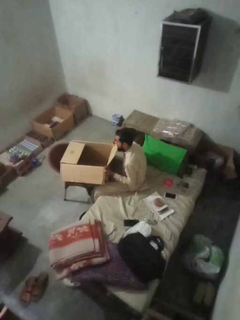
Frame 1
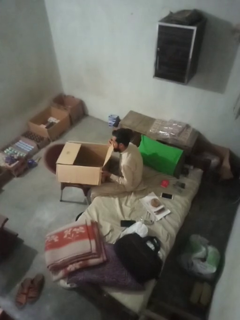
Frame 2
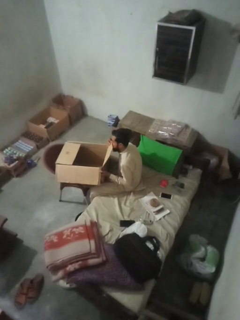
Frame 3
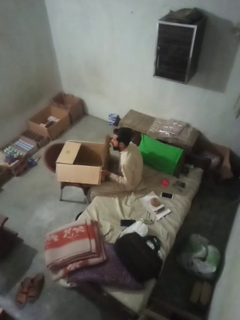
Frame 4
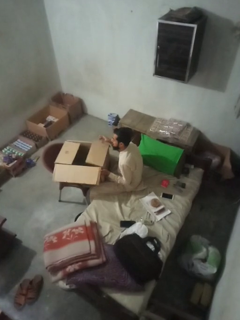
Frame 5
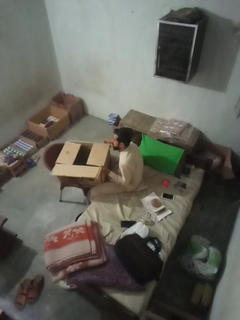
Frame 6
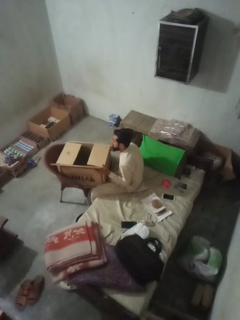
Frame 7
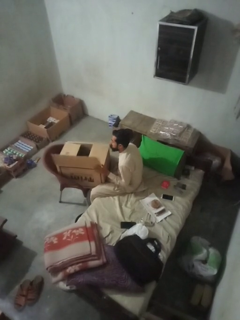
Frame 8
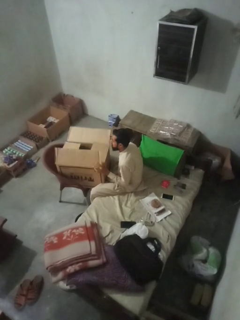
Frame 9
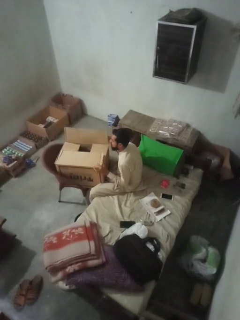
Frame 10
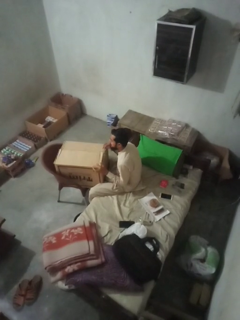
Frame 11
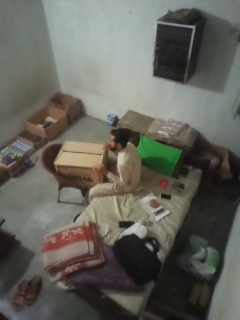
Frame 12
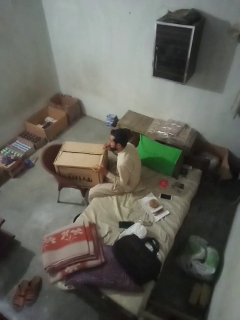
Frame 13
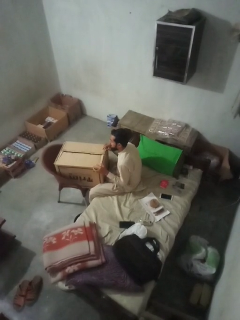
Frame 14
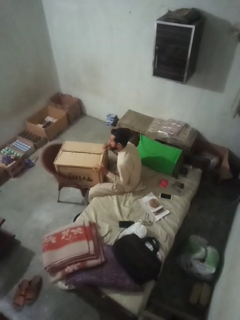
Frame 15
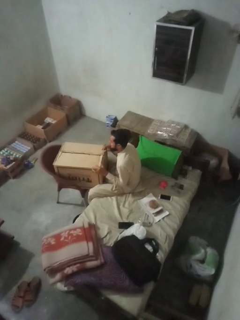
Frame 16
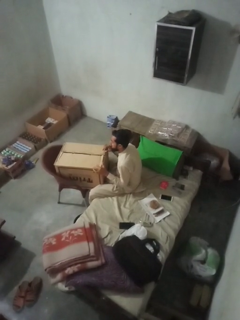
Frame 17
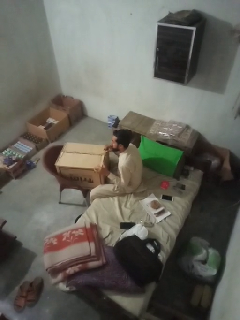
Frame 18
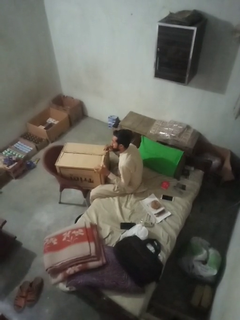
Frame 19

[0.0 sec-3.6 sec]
person closes box

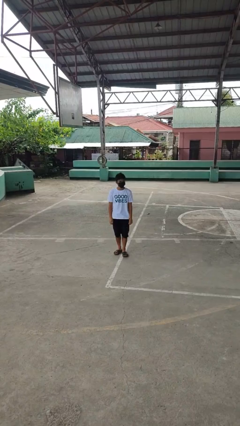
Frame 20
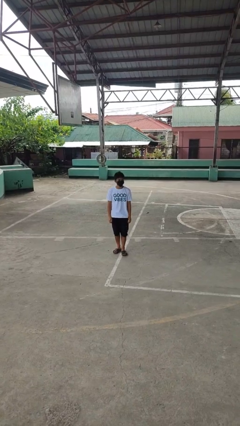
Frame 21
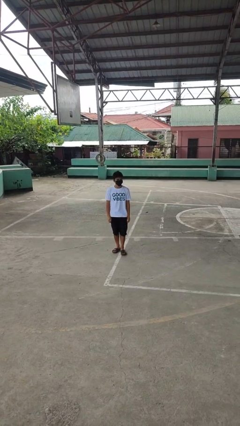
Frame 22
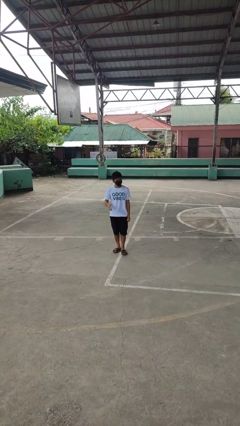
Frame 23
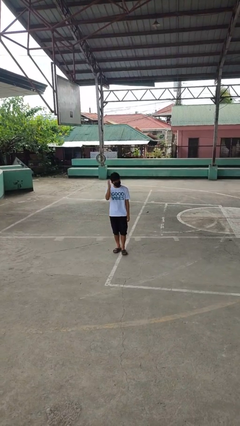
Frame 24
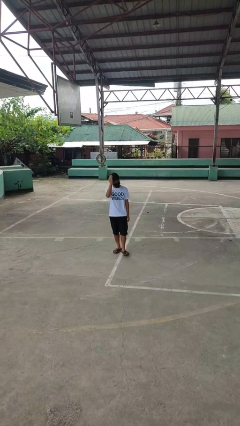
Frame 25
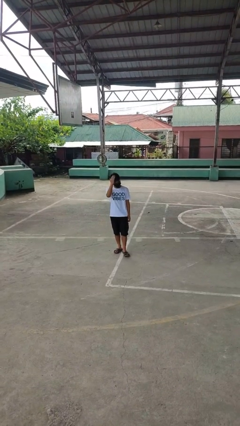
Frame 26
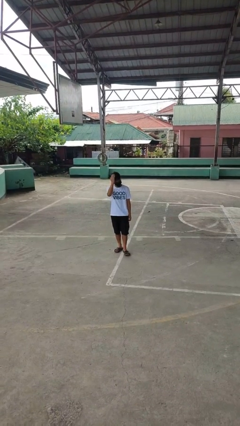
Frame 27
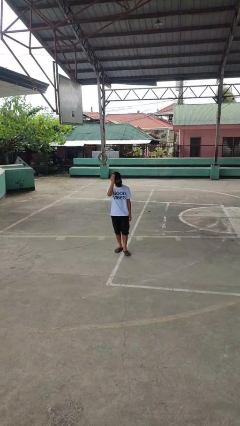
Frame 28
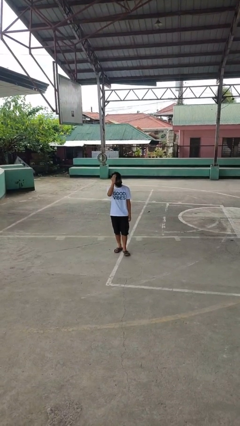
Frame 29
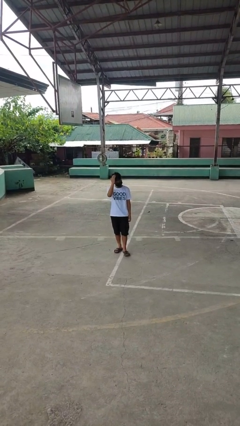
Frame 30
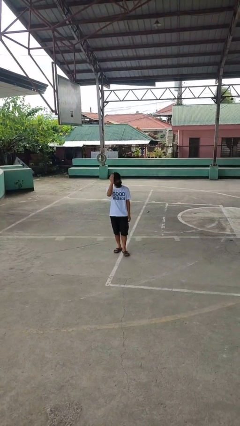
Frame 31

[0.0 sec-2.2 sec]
person pats head

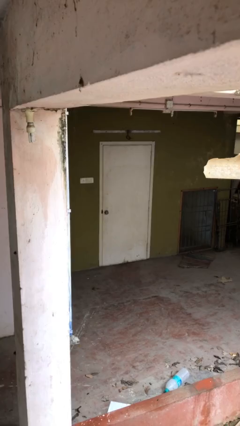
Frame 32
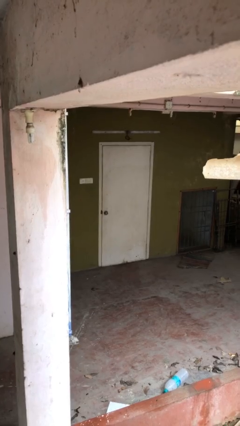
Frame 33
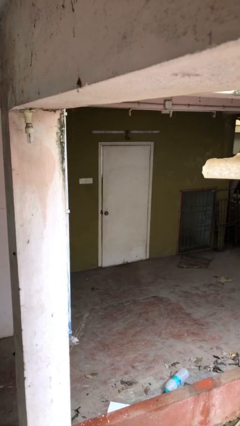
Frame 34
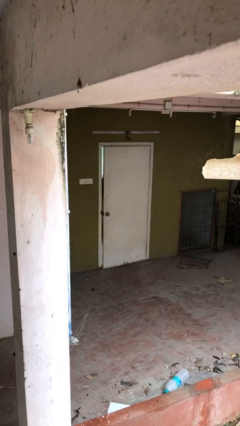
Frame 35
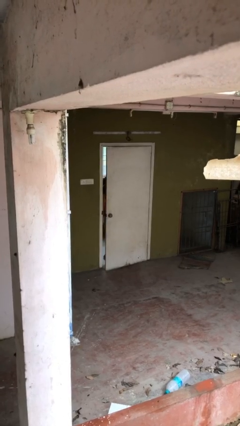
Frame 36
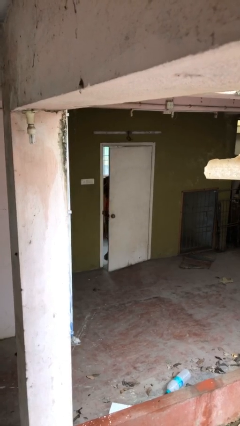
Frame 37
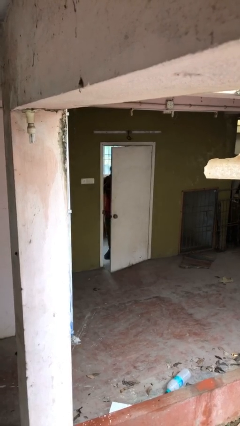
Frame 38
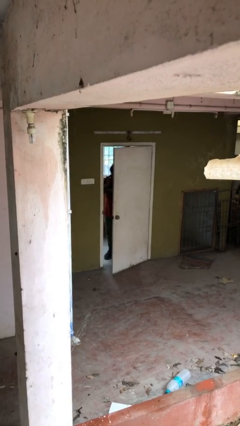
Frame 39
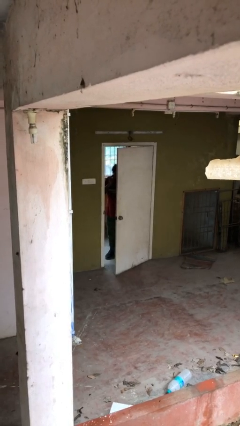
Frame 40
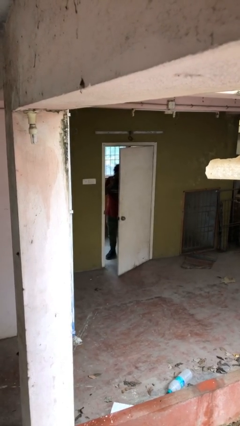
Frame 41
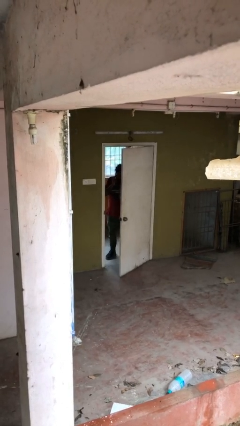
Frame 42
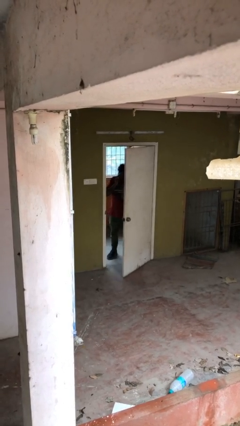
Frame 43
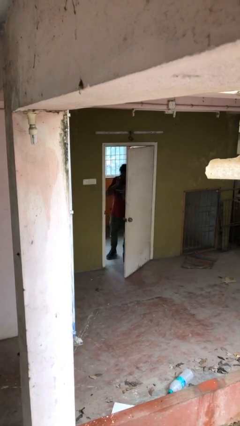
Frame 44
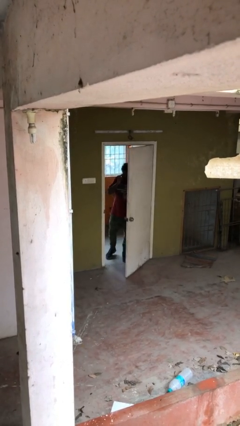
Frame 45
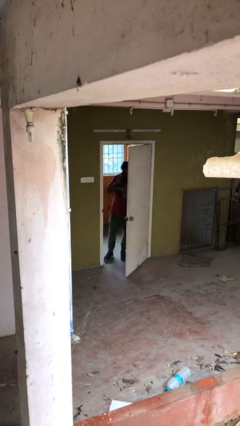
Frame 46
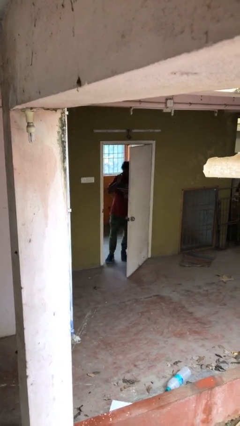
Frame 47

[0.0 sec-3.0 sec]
person opens facility door

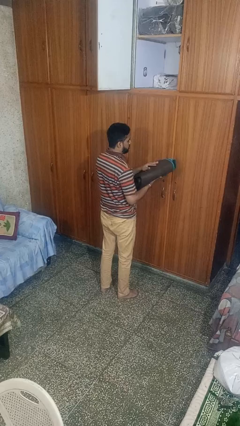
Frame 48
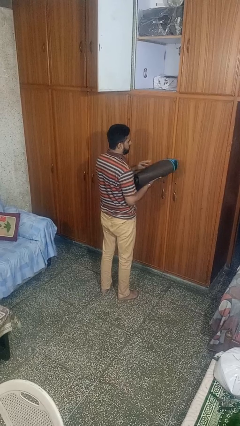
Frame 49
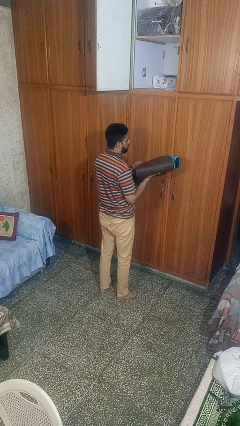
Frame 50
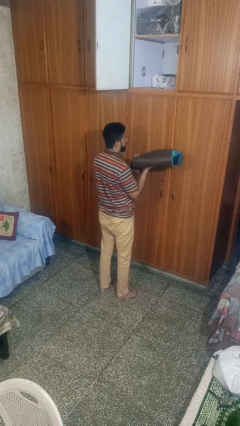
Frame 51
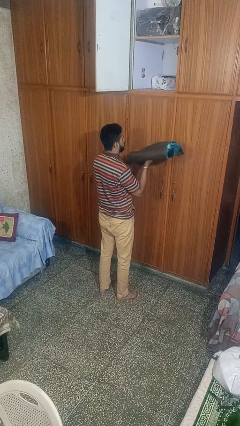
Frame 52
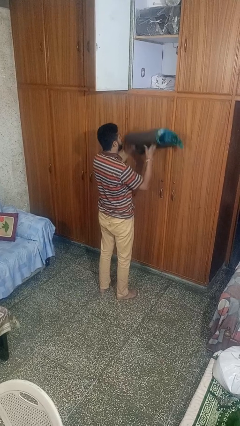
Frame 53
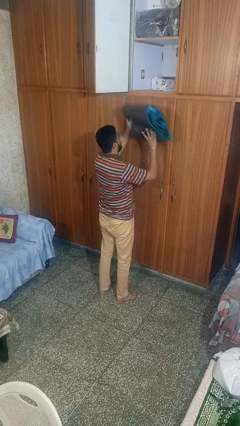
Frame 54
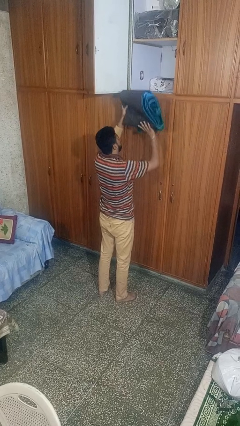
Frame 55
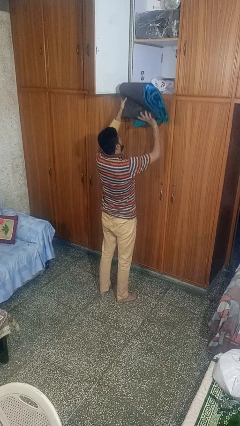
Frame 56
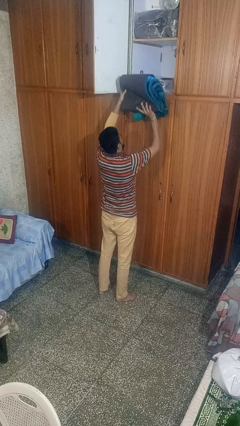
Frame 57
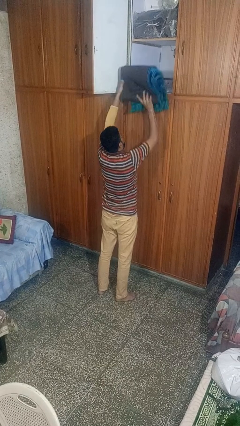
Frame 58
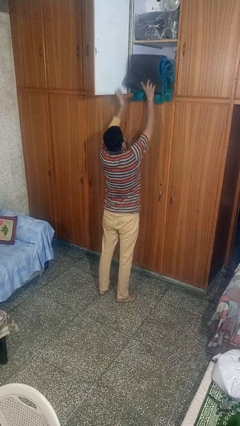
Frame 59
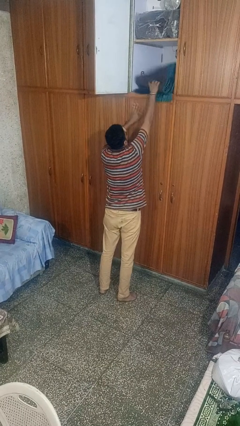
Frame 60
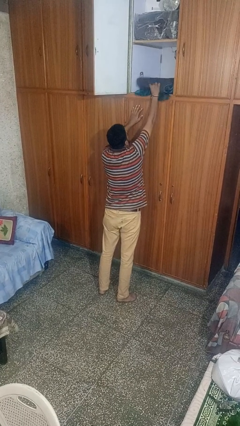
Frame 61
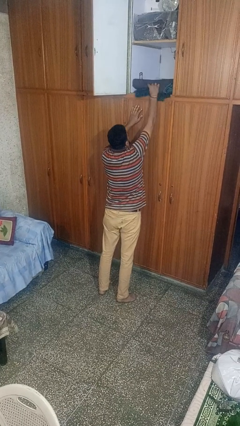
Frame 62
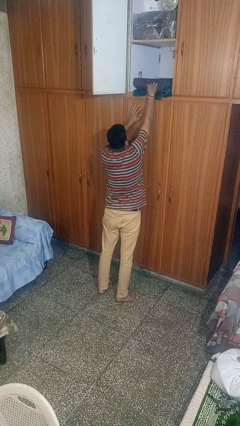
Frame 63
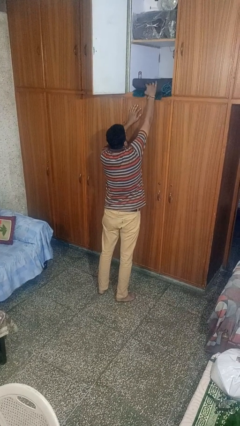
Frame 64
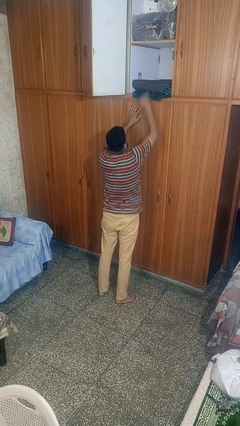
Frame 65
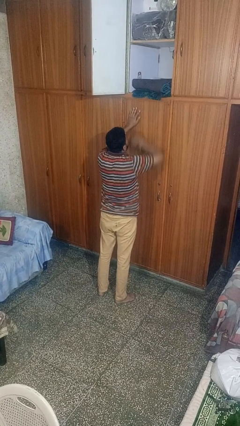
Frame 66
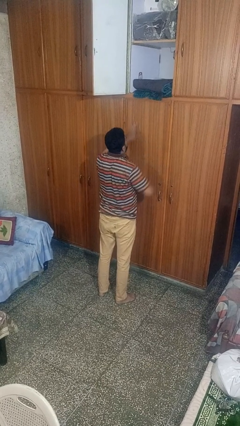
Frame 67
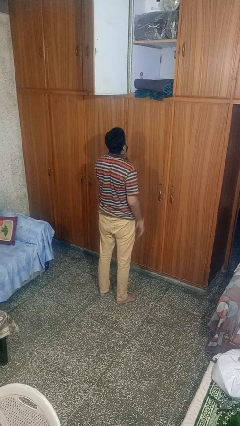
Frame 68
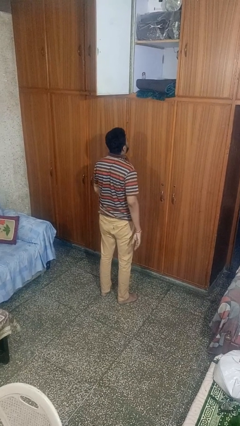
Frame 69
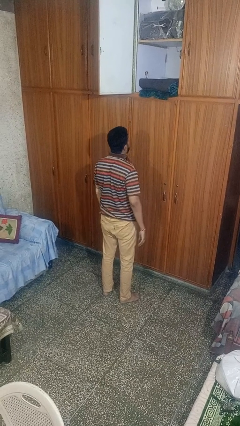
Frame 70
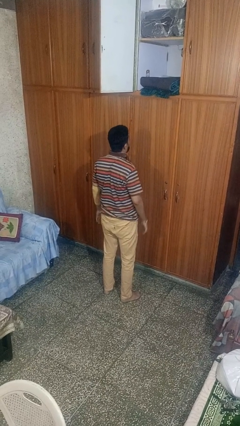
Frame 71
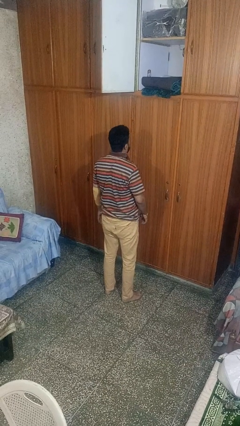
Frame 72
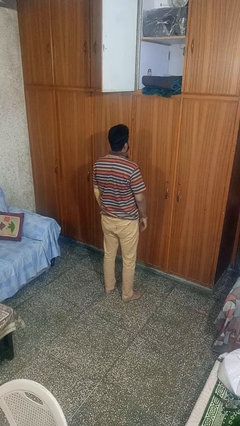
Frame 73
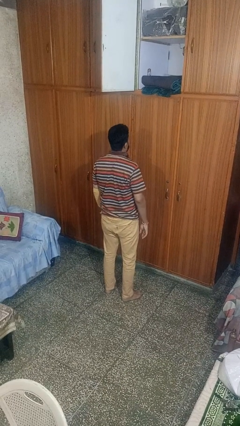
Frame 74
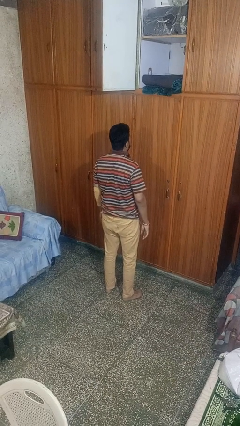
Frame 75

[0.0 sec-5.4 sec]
person puts down object on shelf

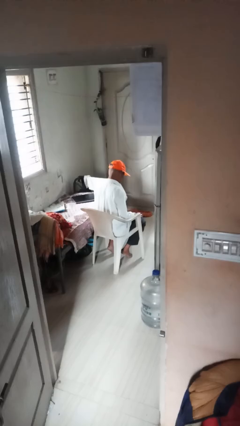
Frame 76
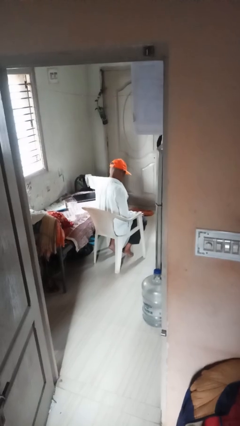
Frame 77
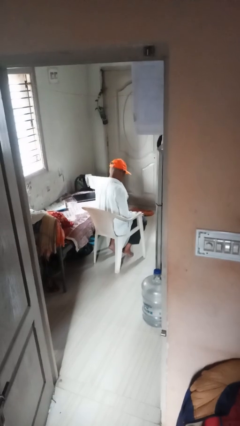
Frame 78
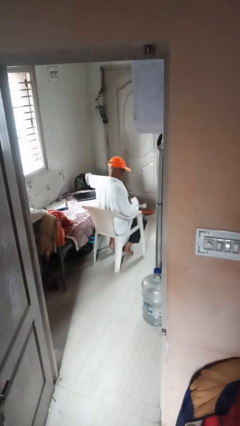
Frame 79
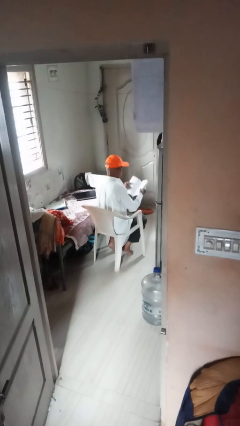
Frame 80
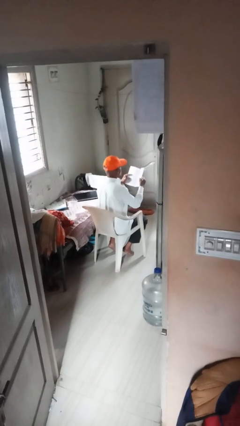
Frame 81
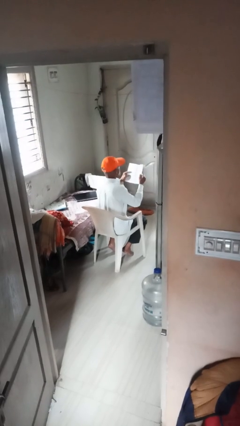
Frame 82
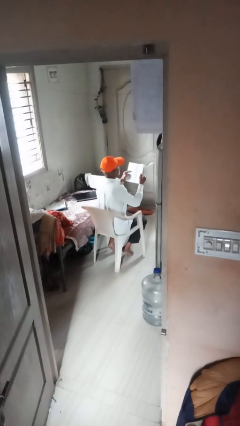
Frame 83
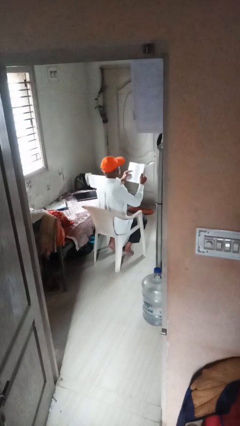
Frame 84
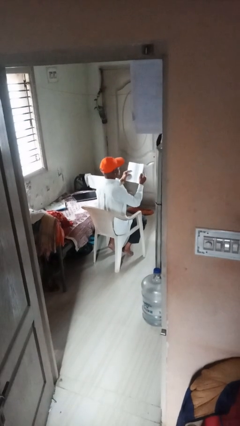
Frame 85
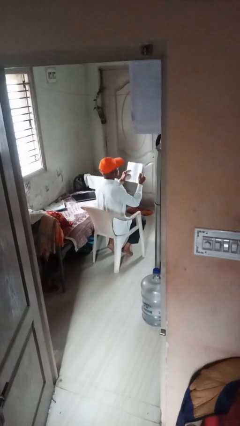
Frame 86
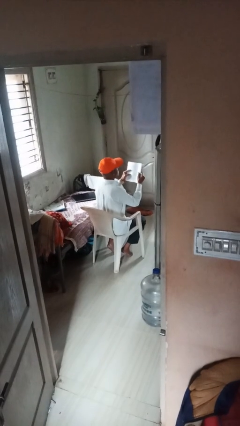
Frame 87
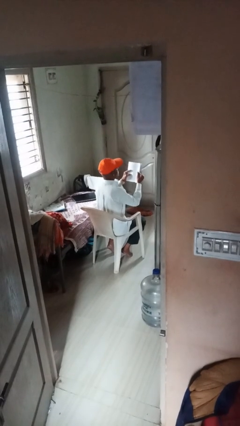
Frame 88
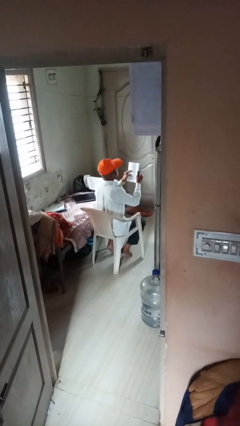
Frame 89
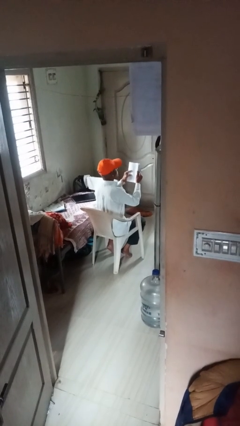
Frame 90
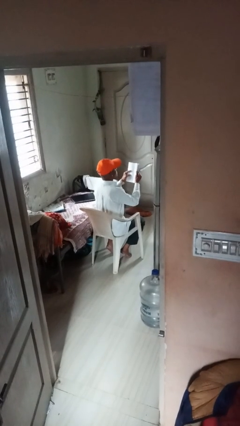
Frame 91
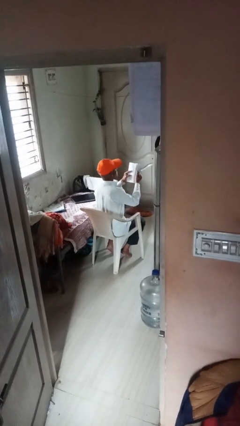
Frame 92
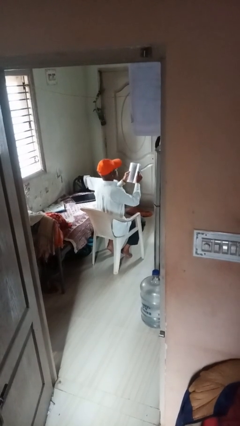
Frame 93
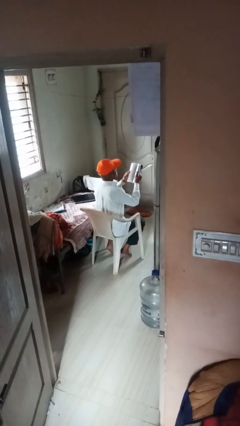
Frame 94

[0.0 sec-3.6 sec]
person reads book

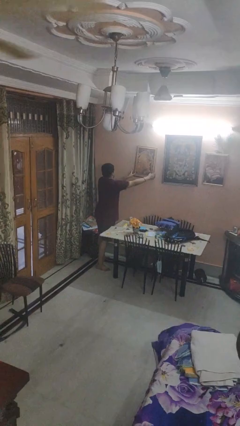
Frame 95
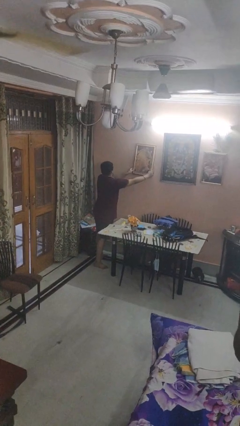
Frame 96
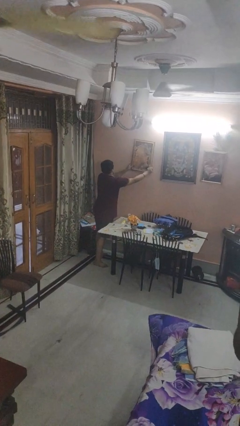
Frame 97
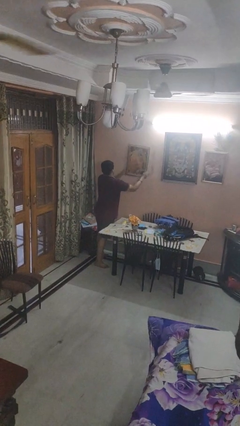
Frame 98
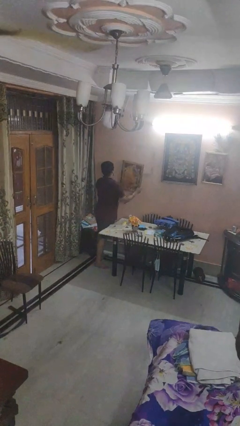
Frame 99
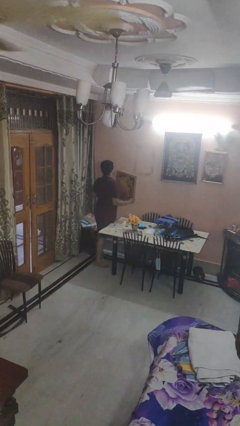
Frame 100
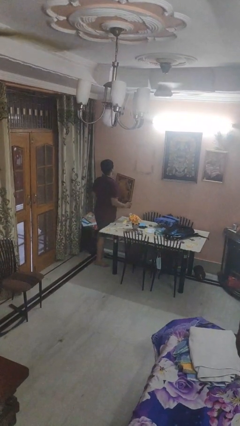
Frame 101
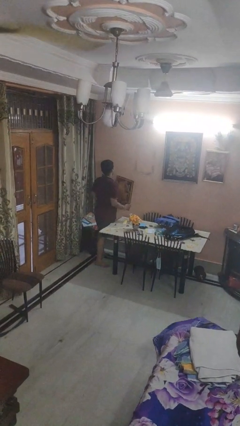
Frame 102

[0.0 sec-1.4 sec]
person takes down picture frame
